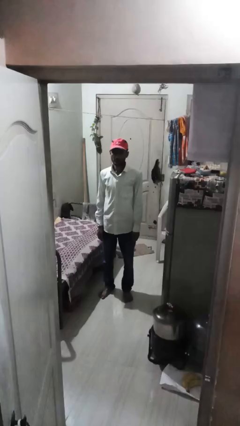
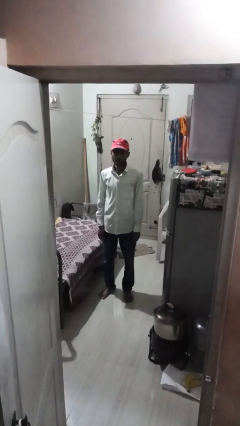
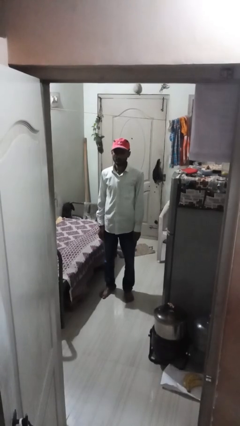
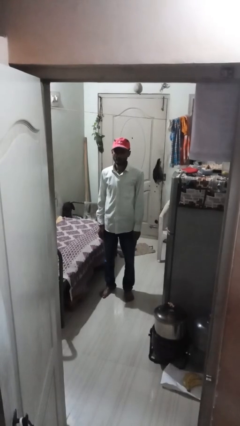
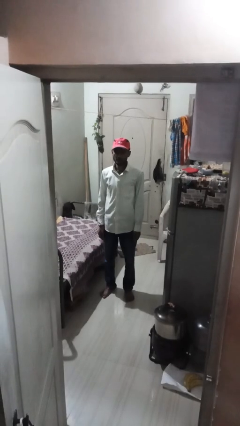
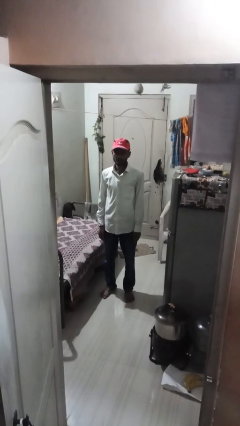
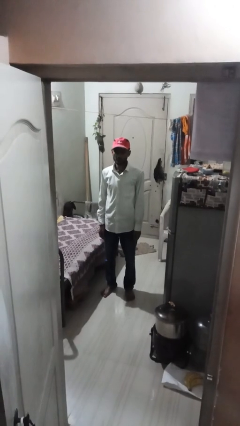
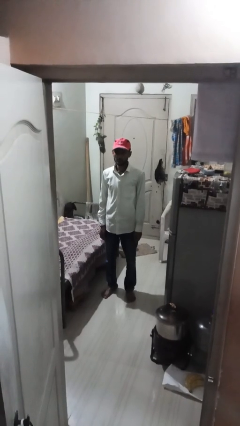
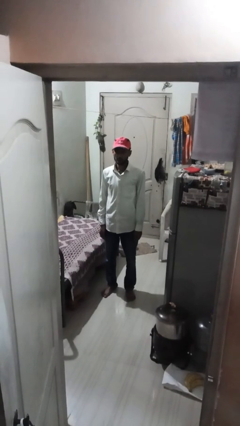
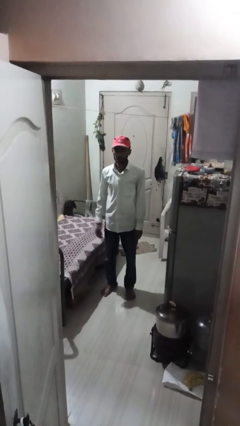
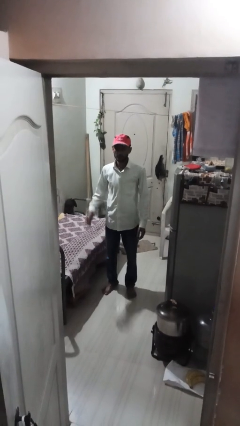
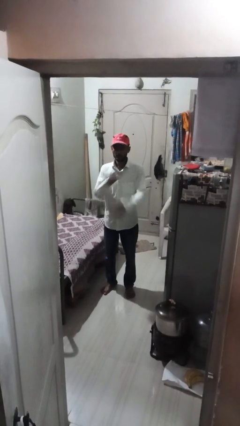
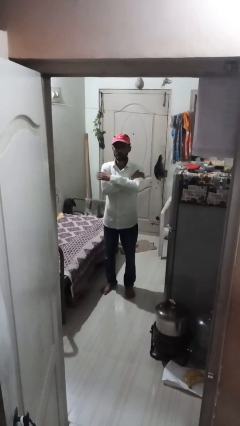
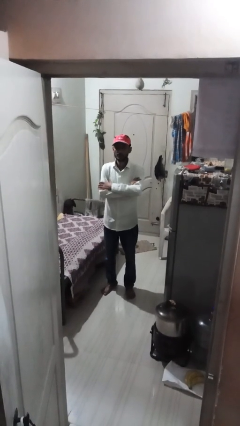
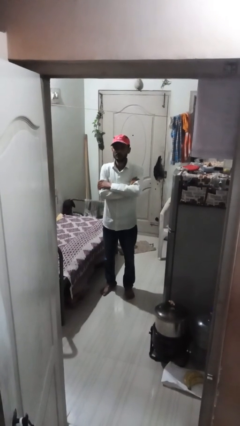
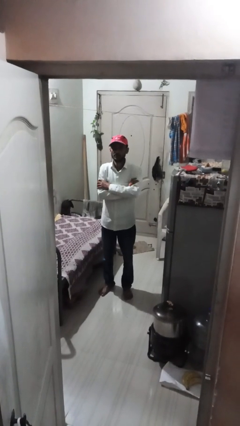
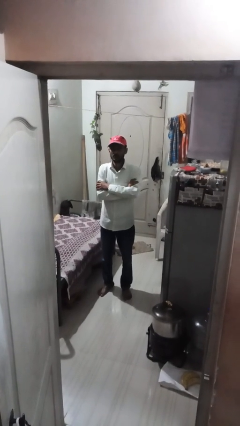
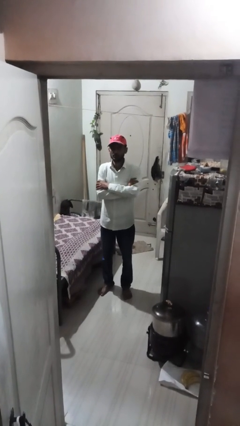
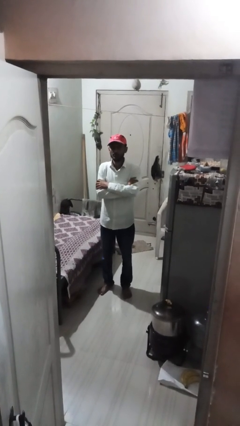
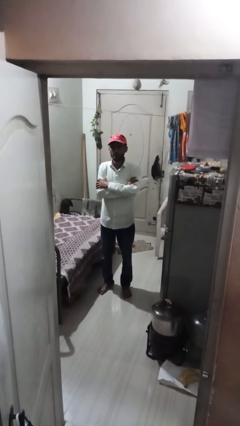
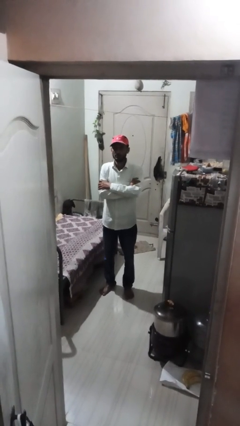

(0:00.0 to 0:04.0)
person crosses arms

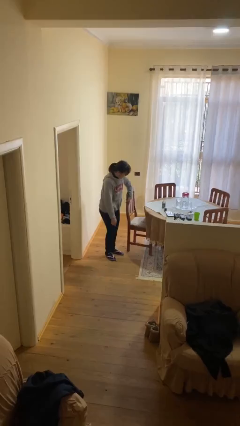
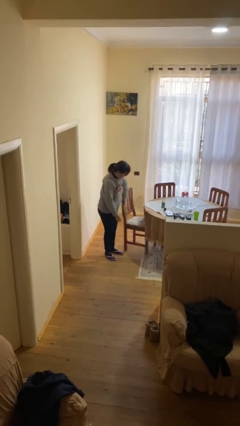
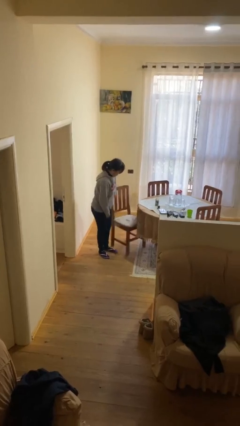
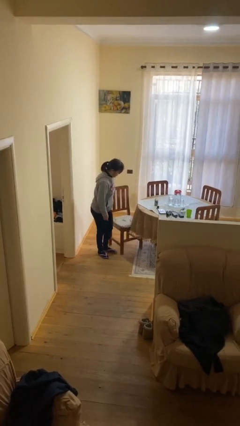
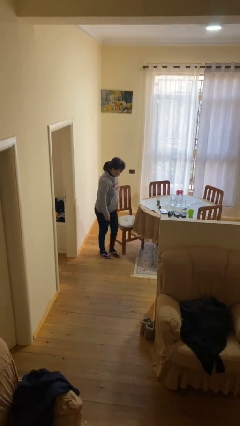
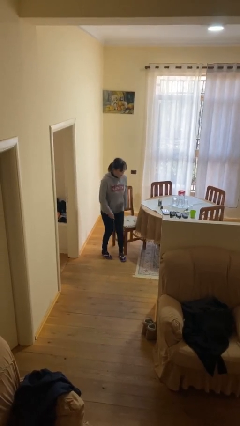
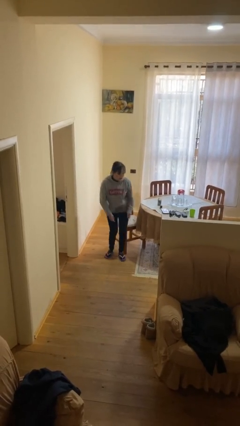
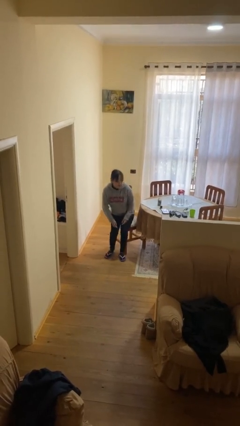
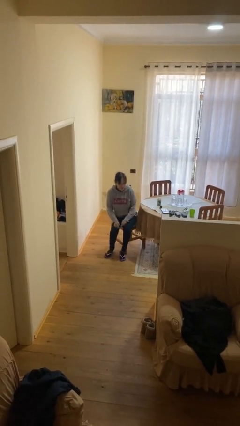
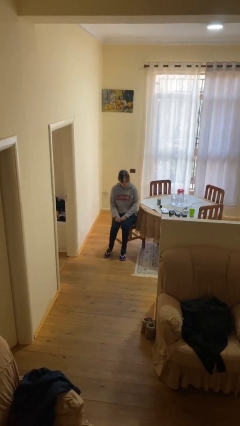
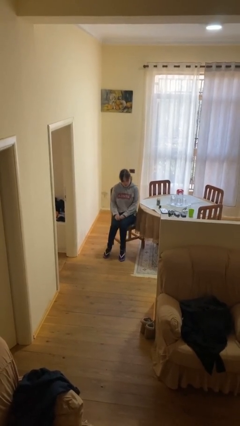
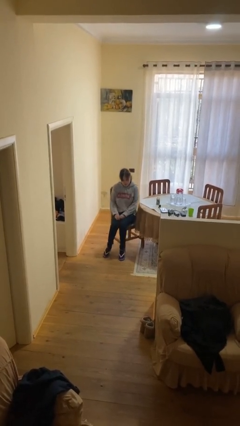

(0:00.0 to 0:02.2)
person sits down

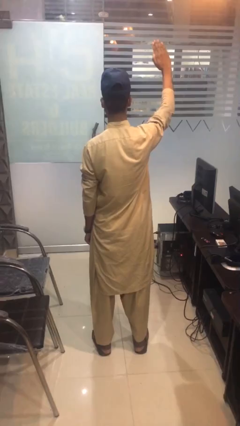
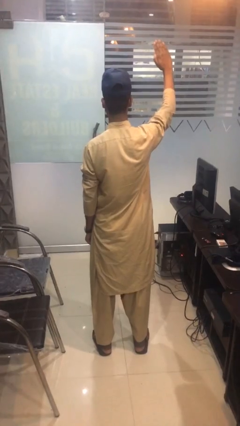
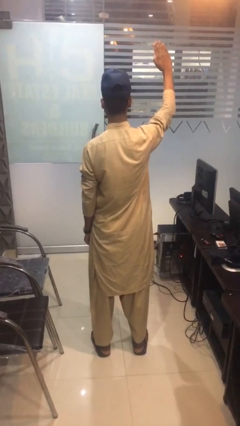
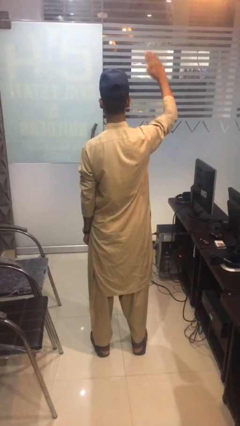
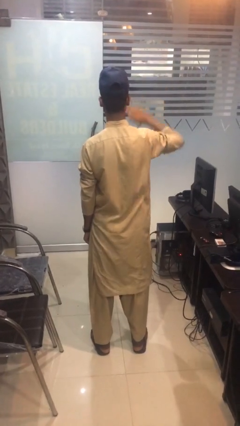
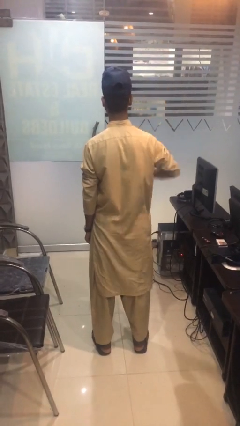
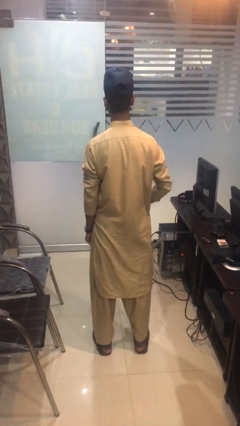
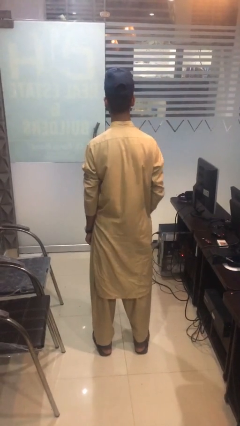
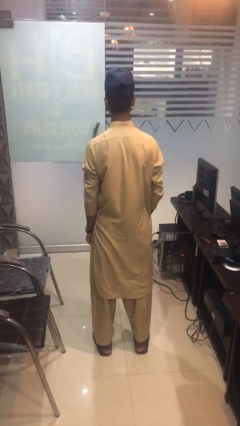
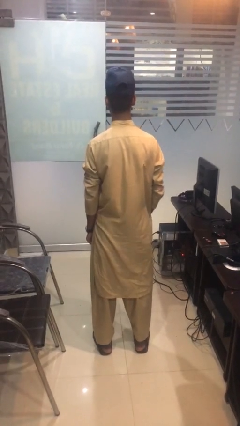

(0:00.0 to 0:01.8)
person gestures swipe down

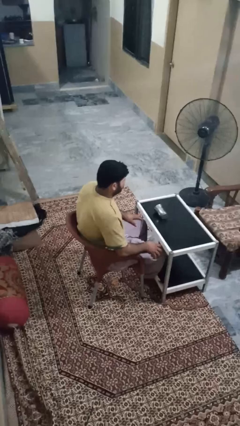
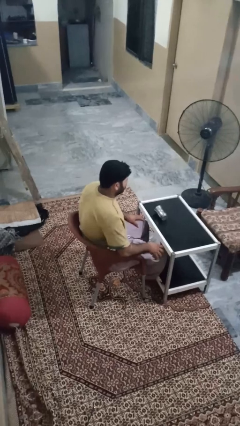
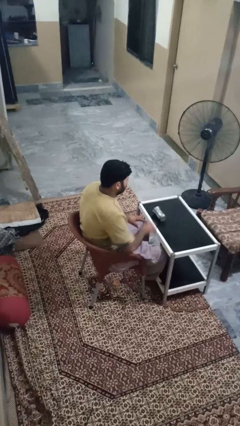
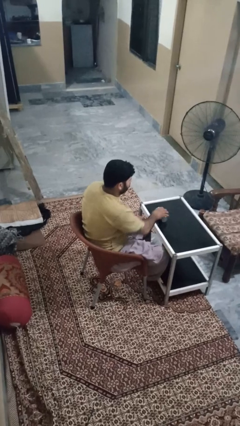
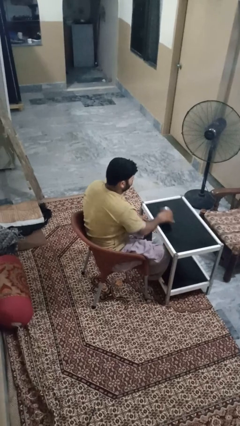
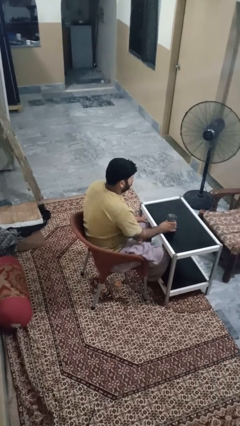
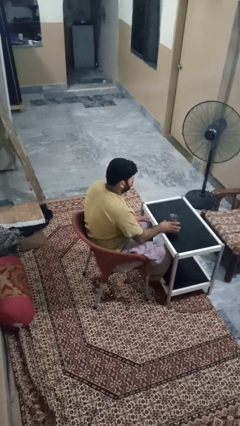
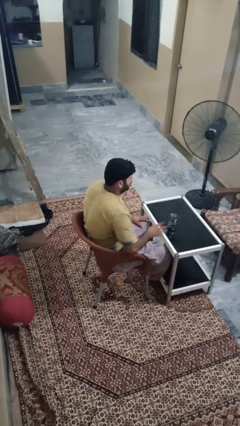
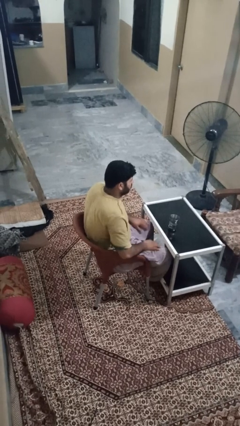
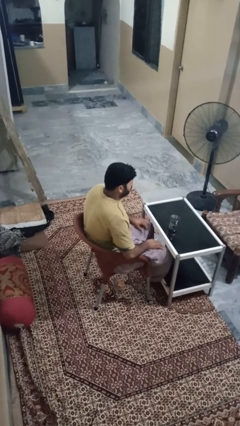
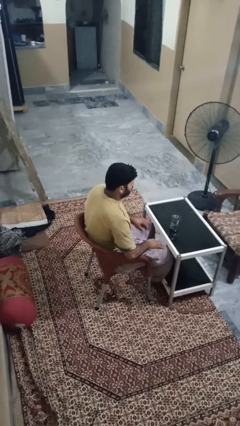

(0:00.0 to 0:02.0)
person sets upright glass

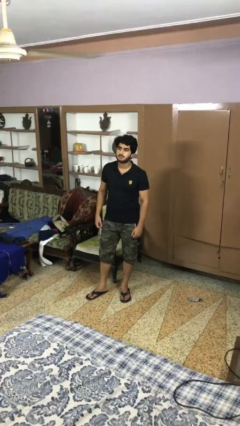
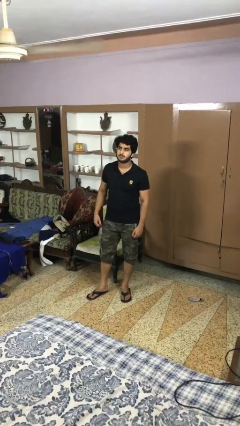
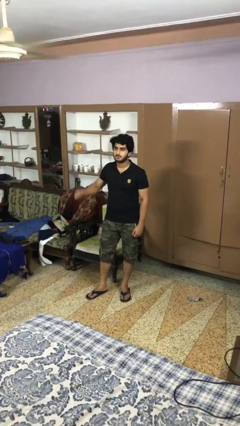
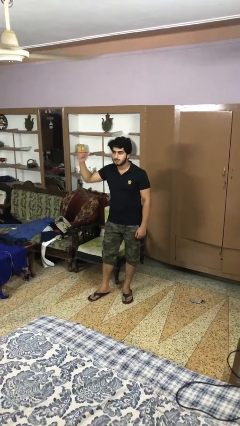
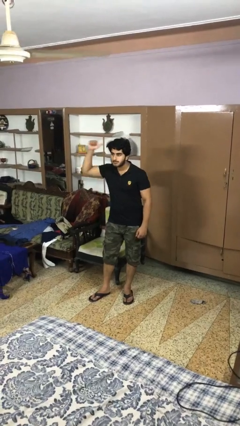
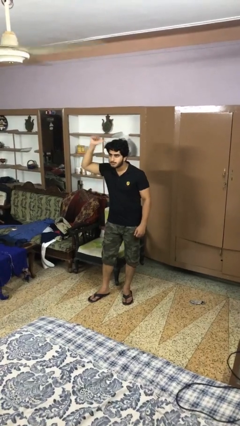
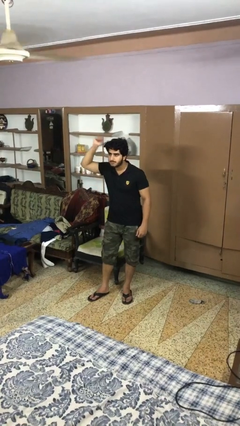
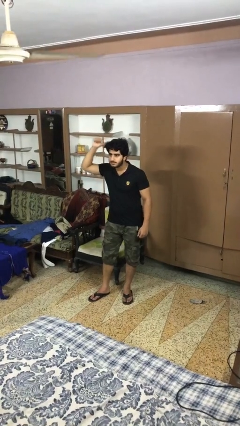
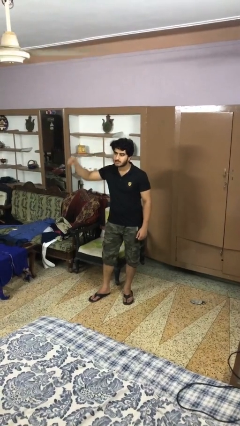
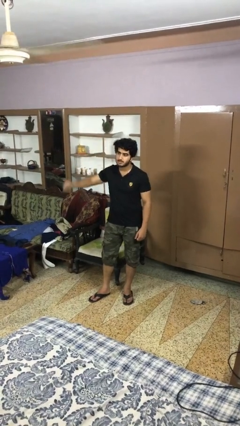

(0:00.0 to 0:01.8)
person gestures behind me

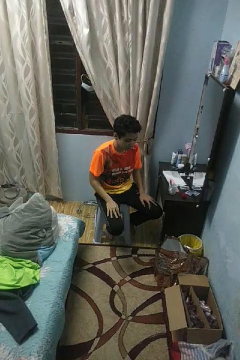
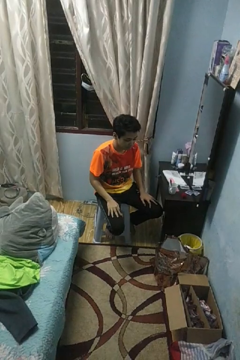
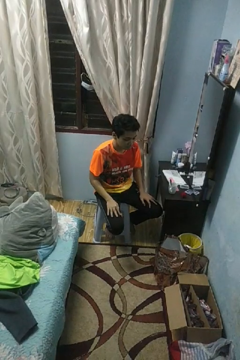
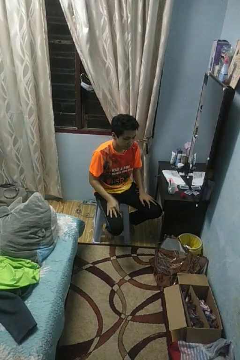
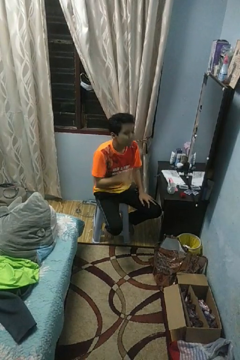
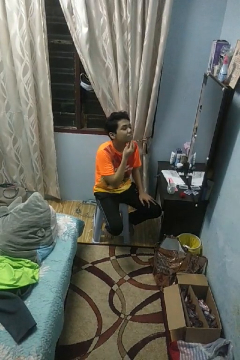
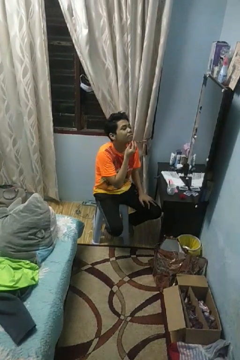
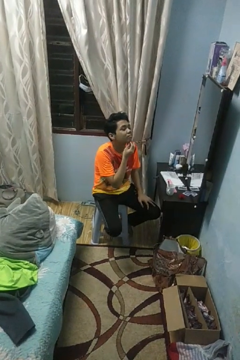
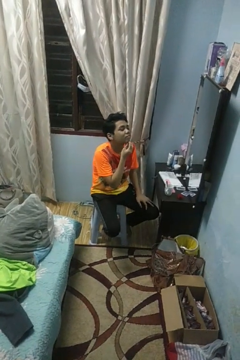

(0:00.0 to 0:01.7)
person strokes chin

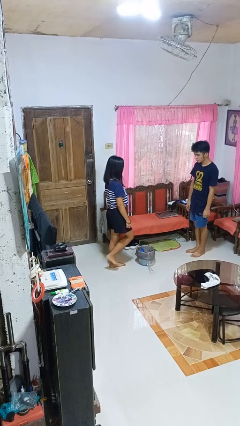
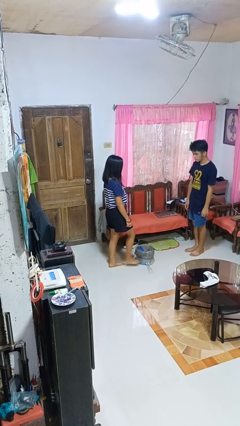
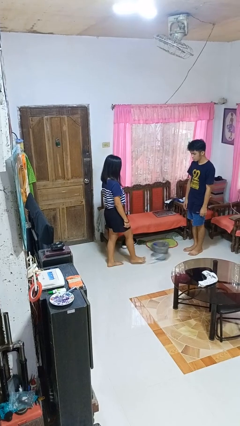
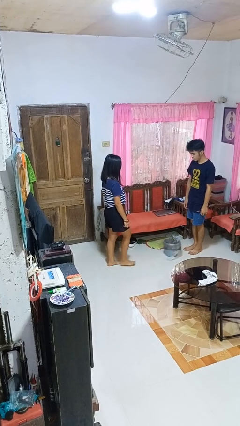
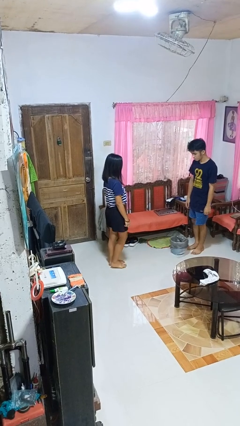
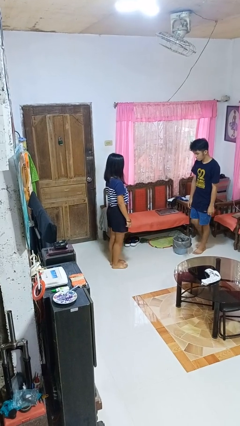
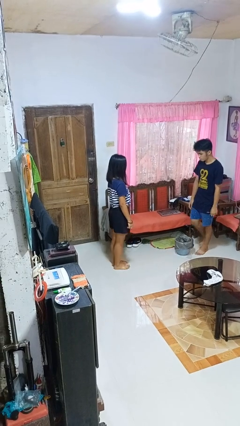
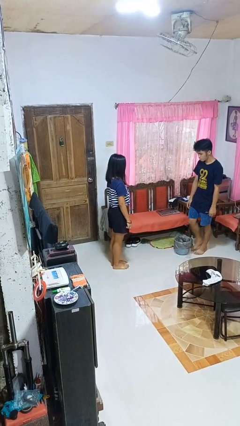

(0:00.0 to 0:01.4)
person kicks object to person

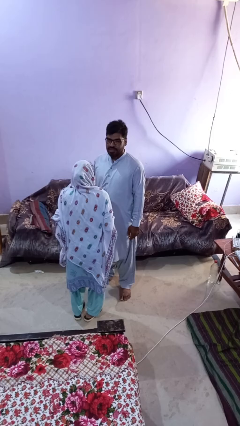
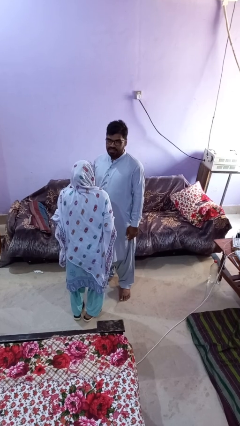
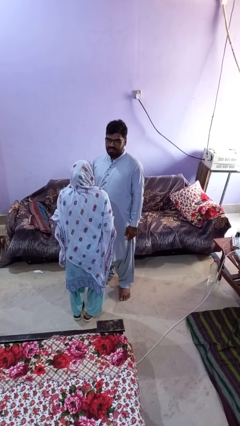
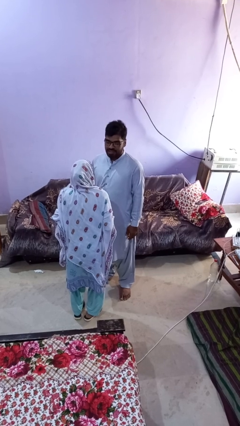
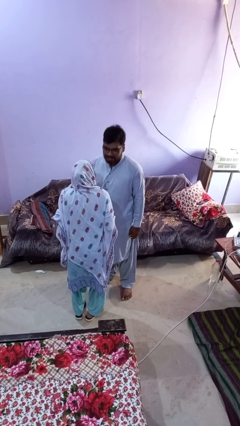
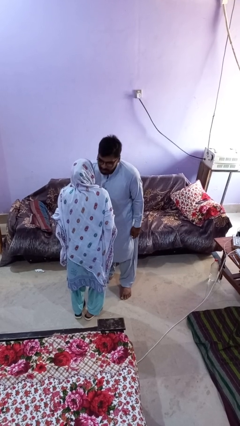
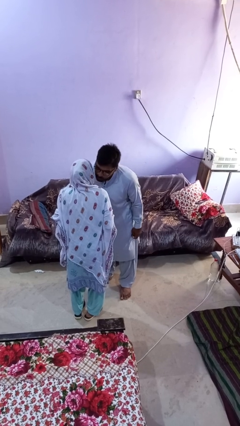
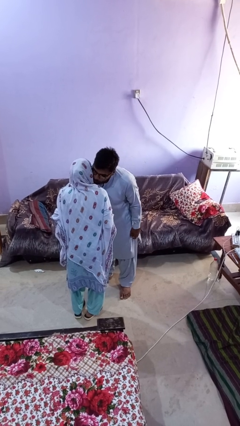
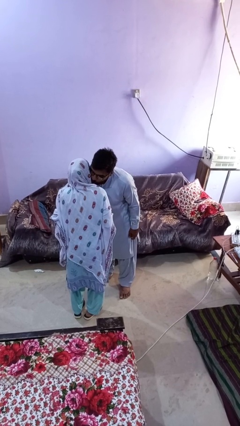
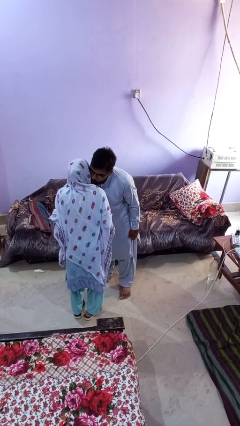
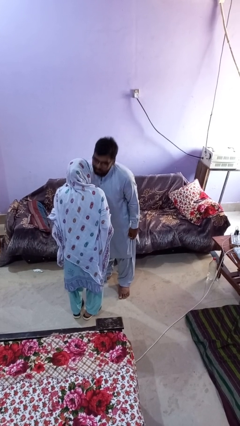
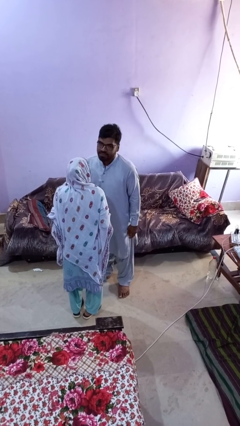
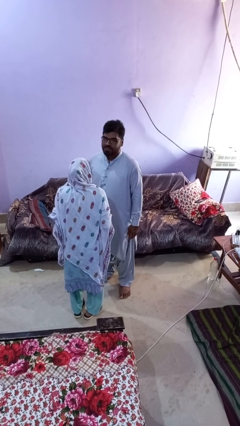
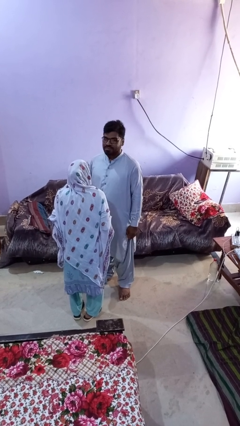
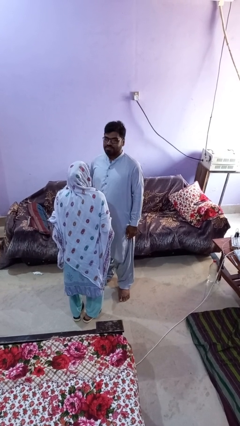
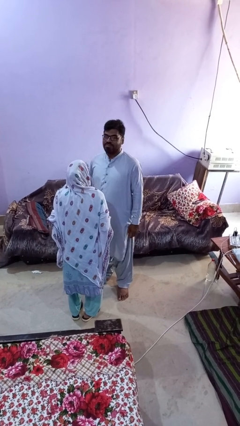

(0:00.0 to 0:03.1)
person kisses cheek of person
